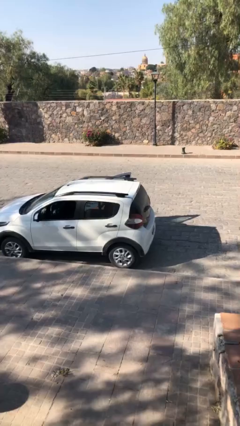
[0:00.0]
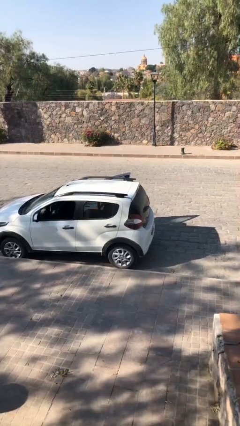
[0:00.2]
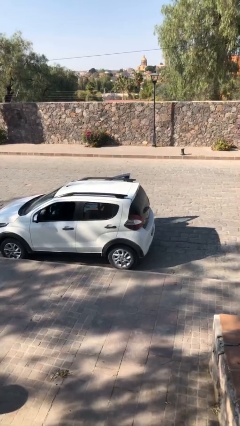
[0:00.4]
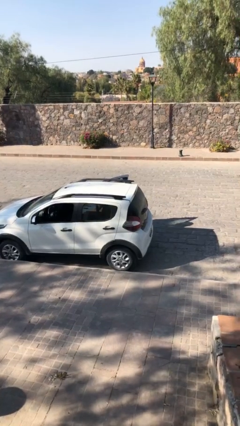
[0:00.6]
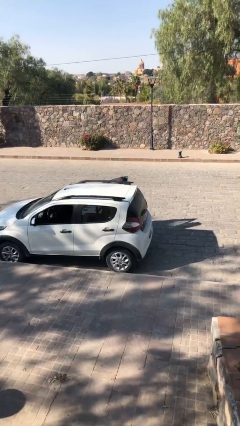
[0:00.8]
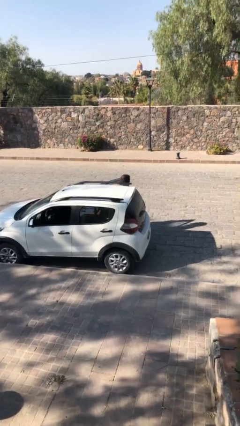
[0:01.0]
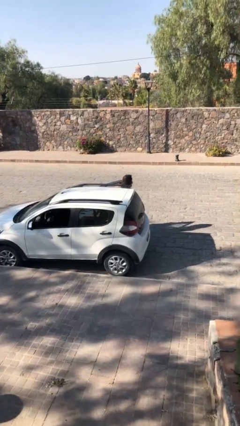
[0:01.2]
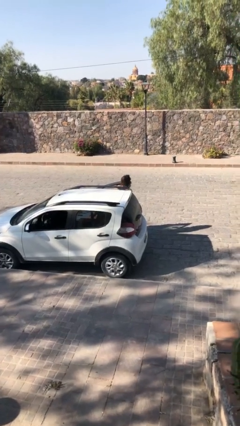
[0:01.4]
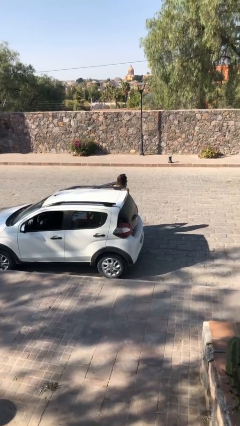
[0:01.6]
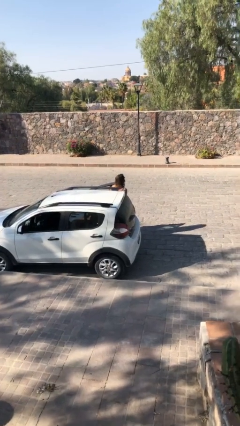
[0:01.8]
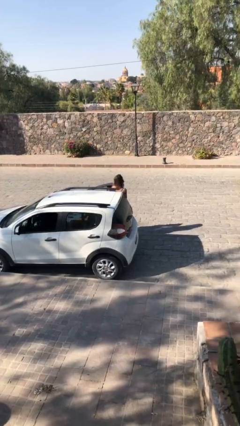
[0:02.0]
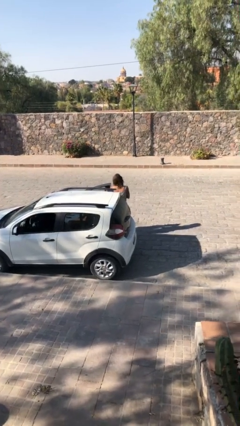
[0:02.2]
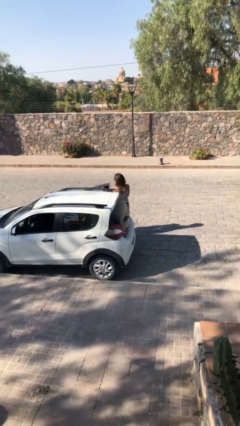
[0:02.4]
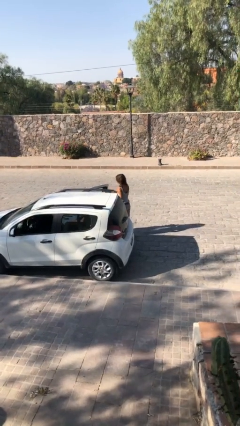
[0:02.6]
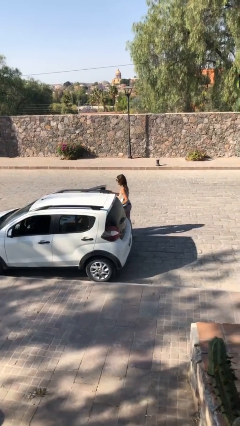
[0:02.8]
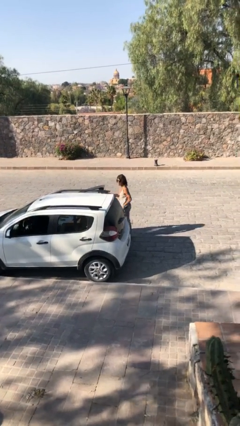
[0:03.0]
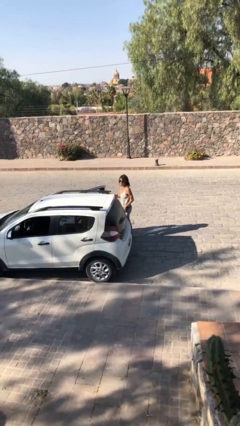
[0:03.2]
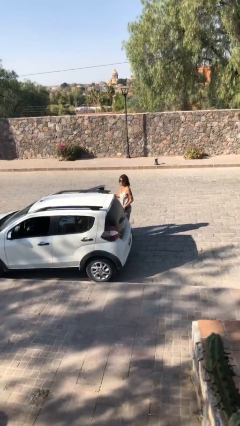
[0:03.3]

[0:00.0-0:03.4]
person exits car

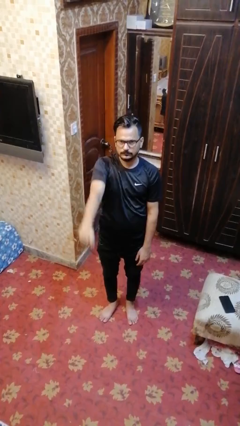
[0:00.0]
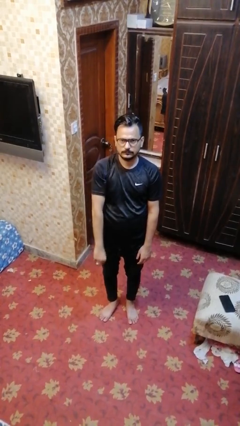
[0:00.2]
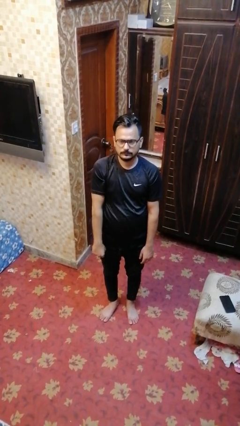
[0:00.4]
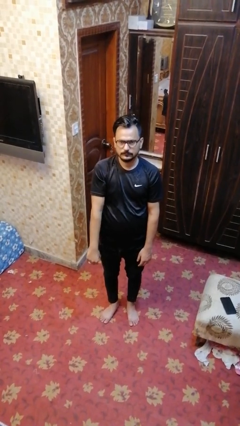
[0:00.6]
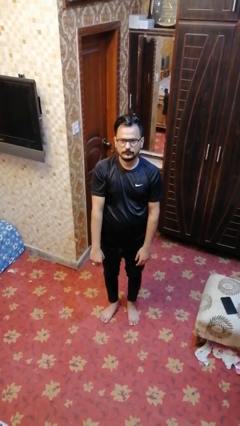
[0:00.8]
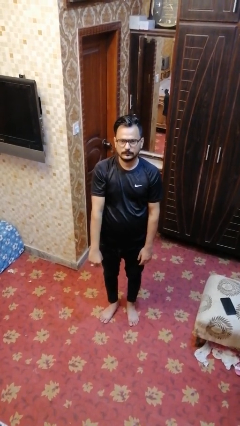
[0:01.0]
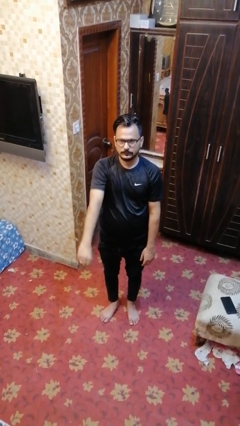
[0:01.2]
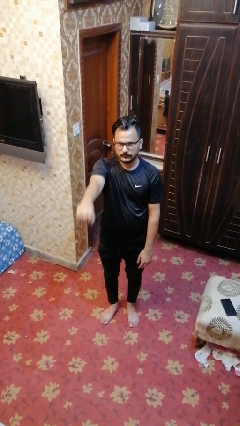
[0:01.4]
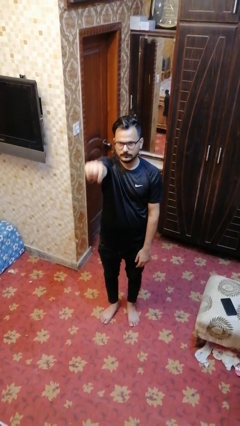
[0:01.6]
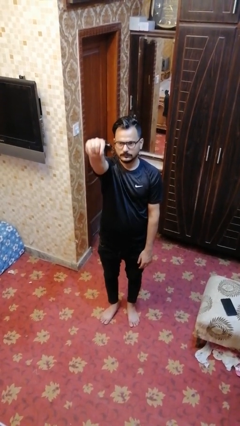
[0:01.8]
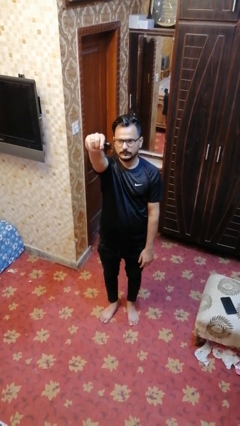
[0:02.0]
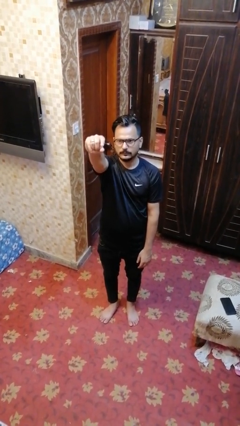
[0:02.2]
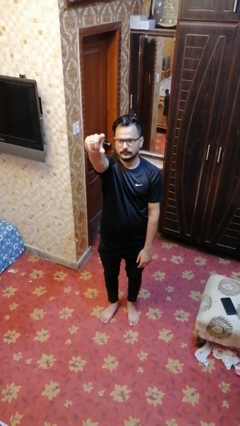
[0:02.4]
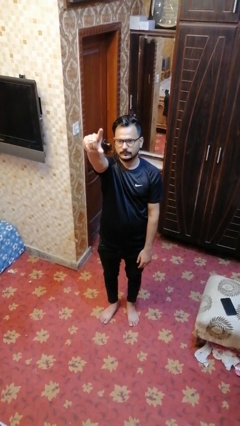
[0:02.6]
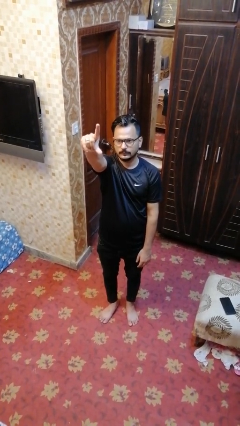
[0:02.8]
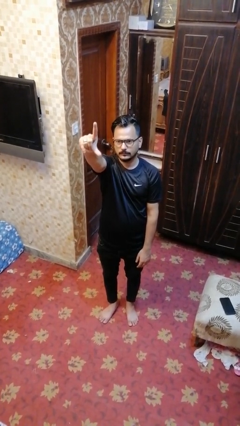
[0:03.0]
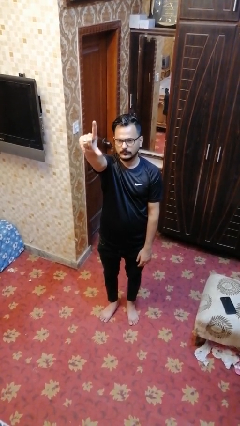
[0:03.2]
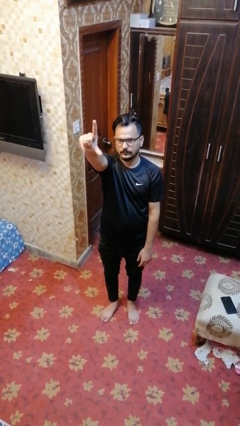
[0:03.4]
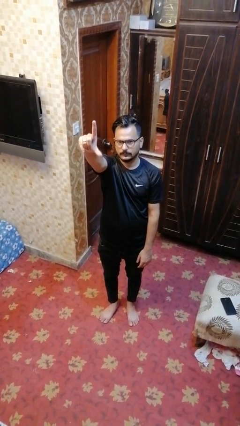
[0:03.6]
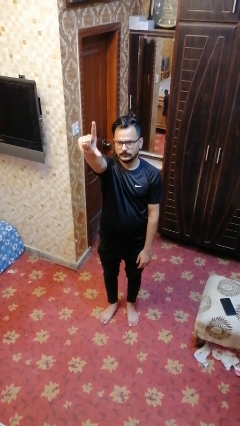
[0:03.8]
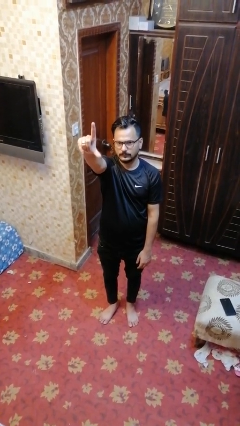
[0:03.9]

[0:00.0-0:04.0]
person gestures zoom out

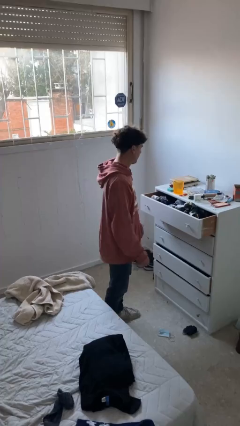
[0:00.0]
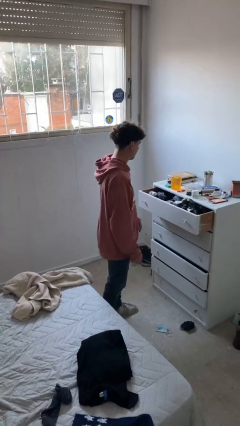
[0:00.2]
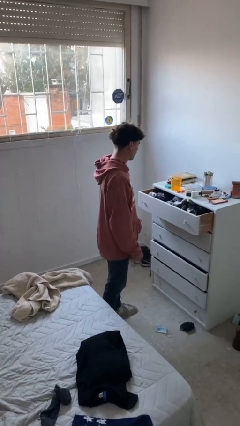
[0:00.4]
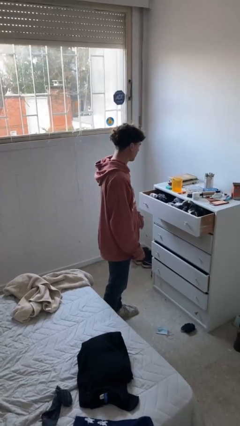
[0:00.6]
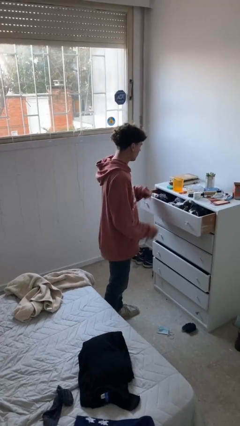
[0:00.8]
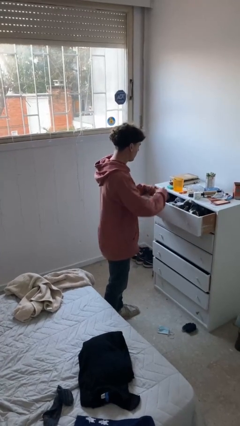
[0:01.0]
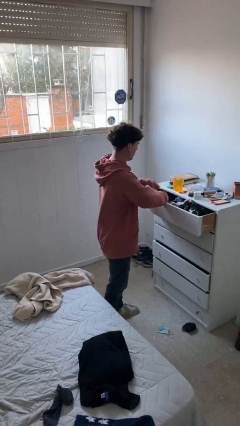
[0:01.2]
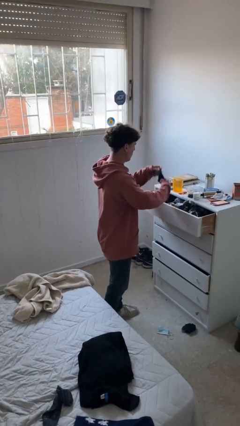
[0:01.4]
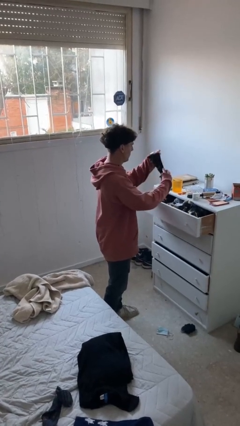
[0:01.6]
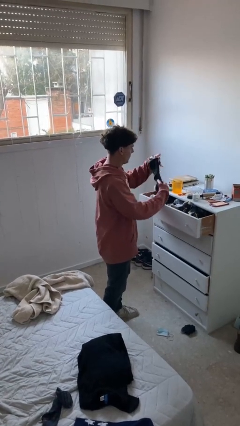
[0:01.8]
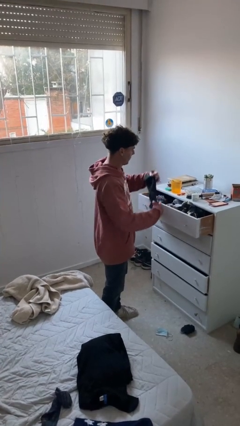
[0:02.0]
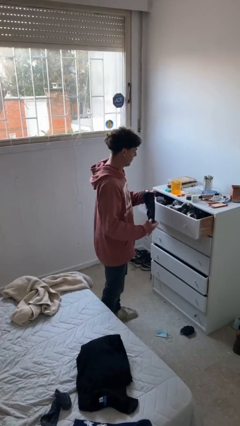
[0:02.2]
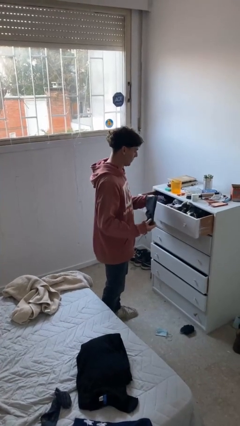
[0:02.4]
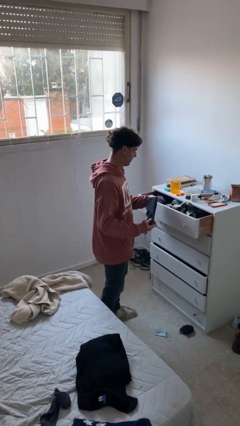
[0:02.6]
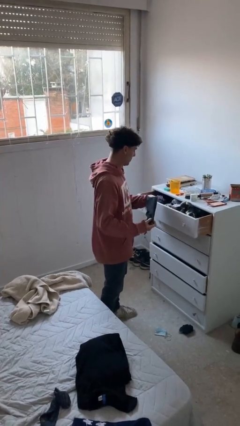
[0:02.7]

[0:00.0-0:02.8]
person takes clothes from dresser

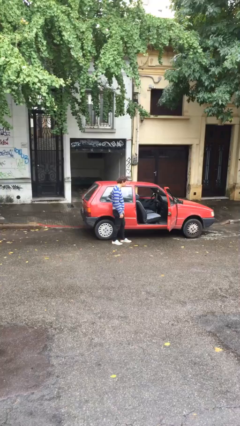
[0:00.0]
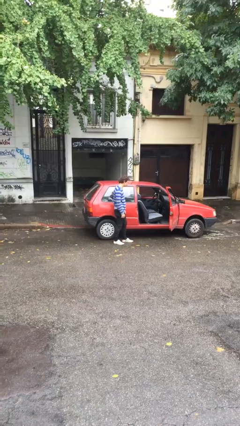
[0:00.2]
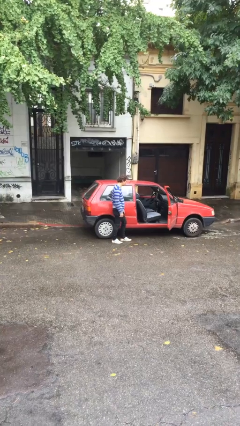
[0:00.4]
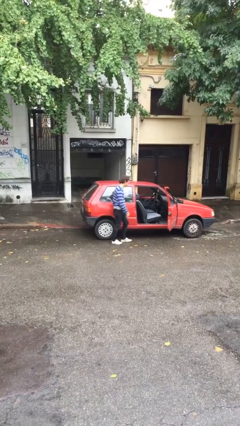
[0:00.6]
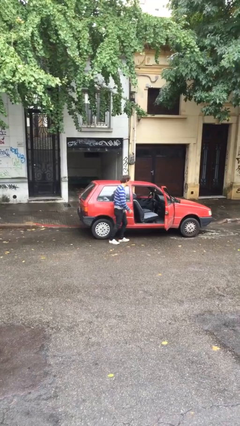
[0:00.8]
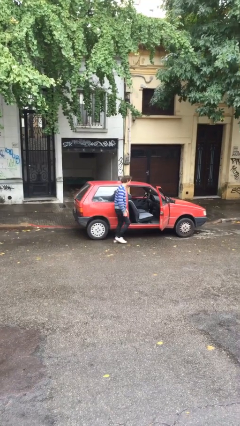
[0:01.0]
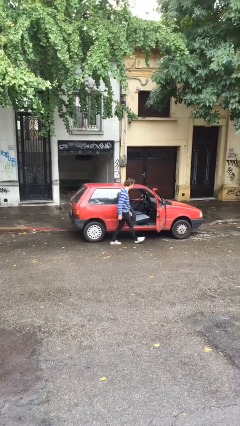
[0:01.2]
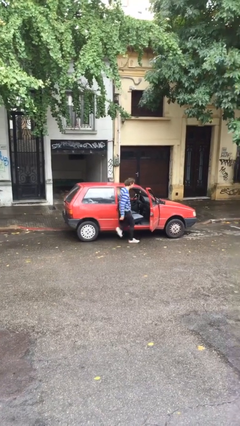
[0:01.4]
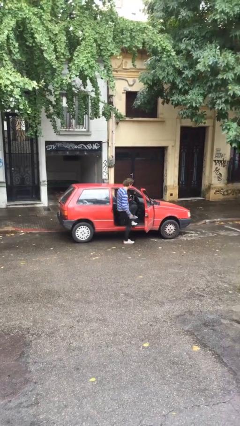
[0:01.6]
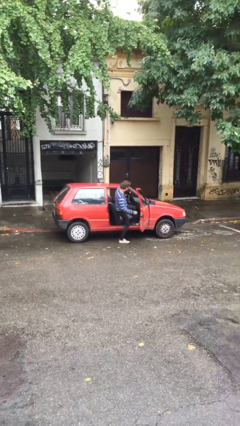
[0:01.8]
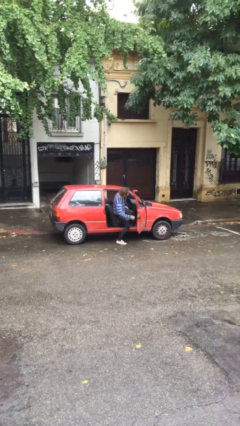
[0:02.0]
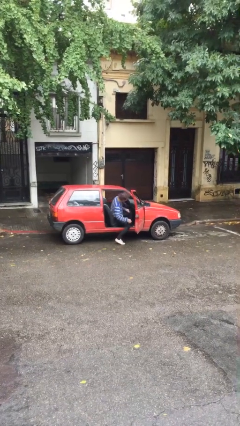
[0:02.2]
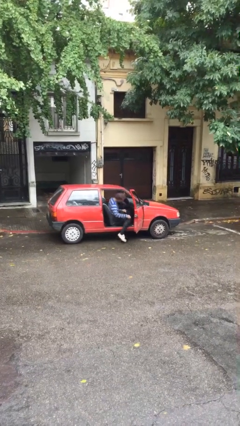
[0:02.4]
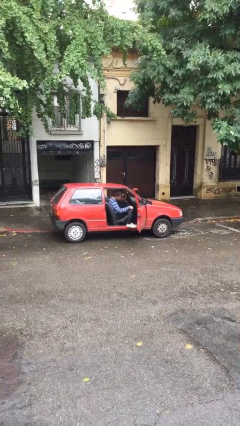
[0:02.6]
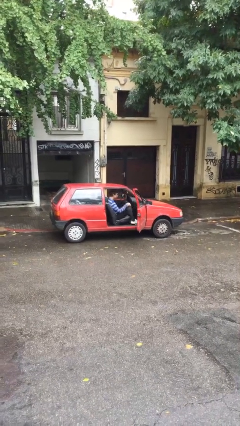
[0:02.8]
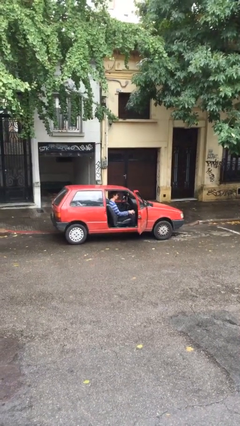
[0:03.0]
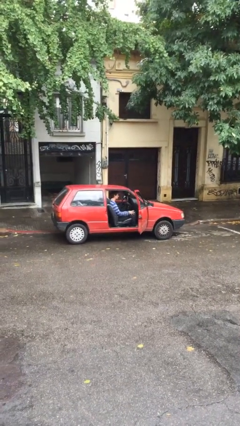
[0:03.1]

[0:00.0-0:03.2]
person enters car

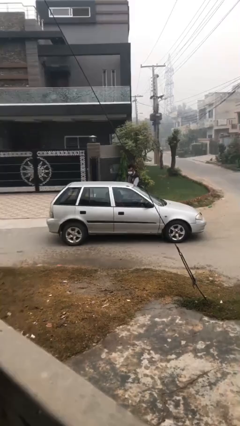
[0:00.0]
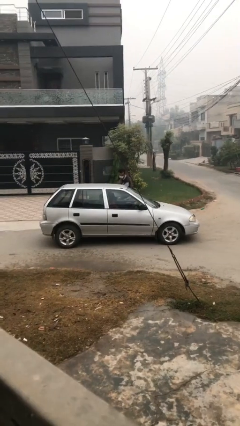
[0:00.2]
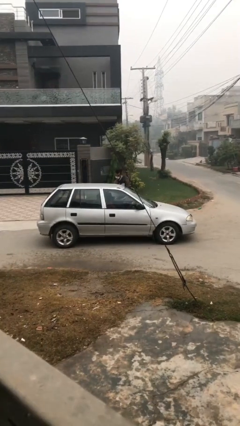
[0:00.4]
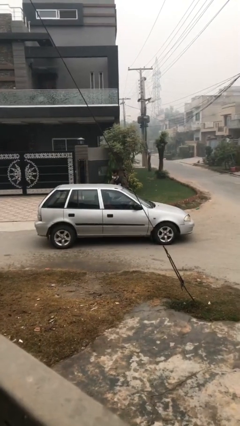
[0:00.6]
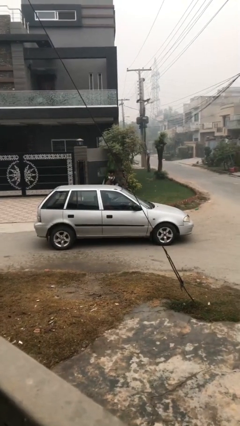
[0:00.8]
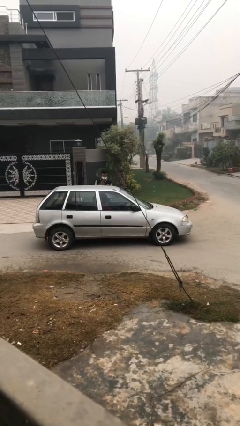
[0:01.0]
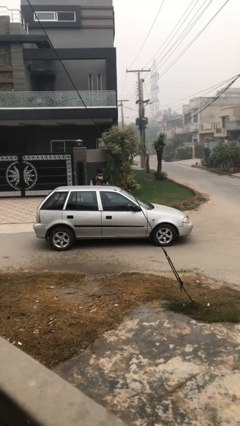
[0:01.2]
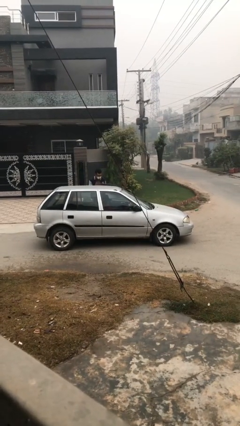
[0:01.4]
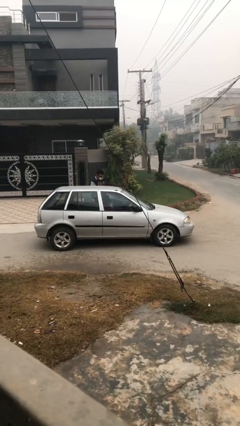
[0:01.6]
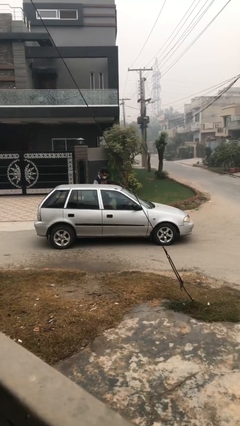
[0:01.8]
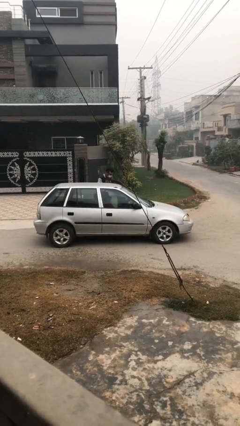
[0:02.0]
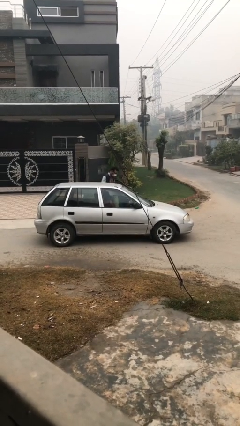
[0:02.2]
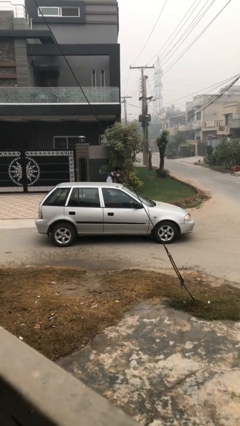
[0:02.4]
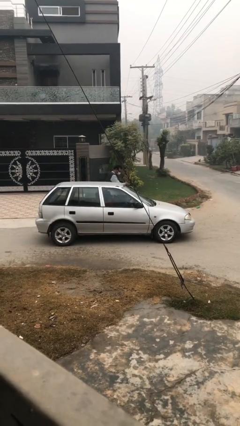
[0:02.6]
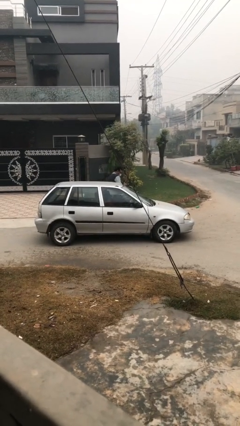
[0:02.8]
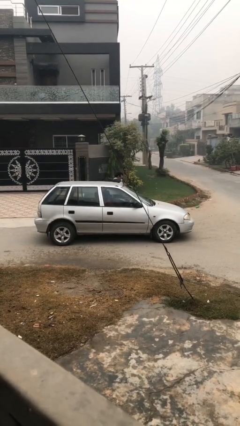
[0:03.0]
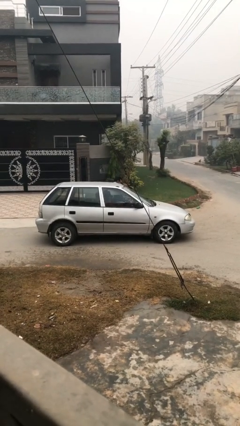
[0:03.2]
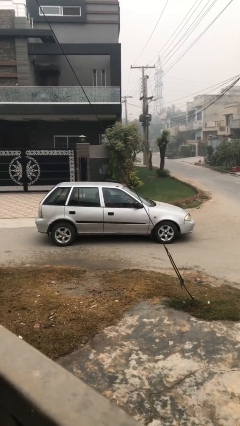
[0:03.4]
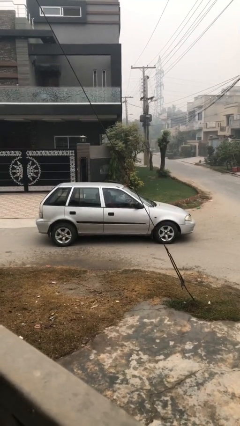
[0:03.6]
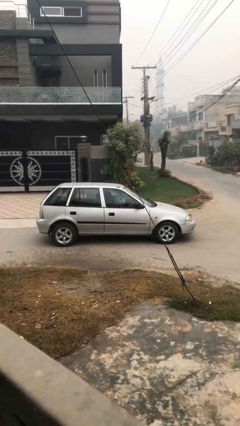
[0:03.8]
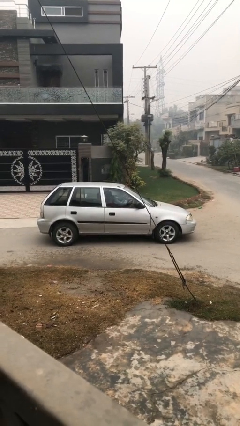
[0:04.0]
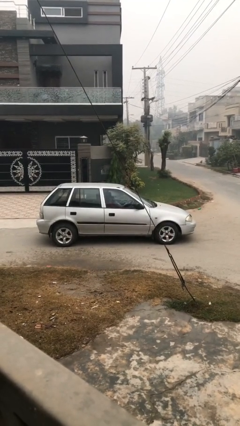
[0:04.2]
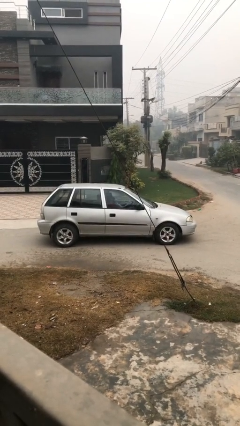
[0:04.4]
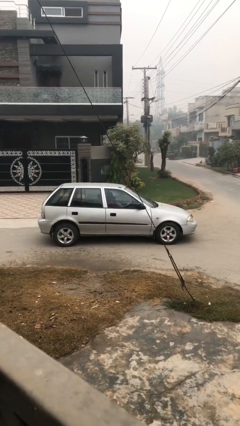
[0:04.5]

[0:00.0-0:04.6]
car picks up person
